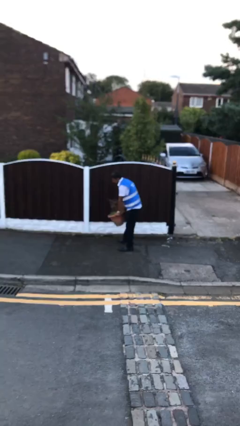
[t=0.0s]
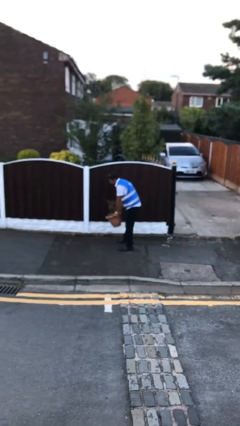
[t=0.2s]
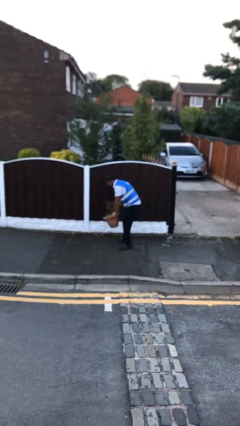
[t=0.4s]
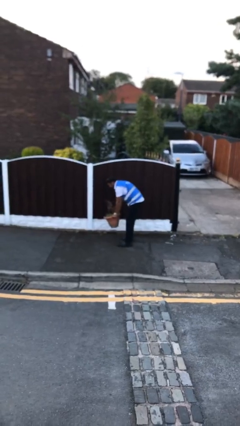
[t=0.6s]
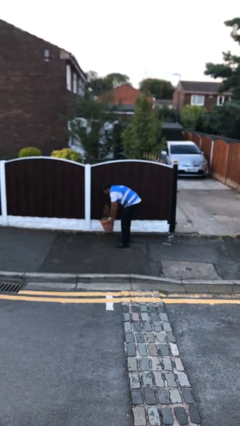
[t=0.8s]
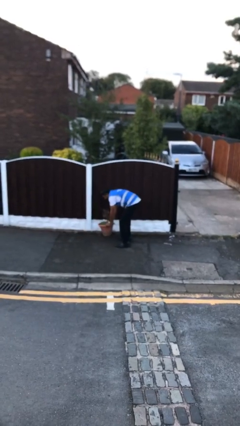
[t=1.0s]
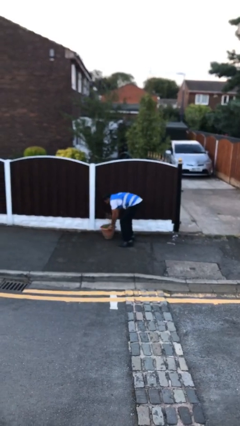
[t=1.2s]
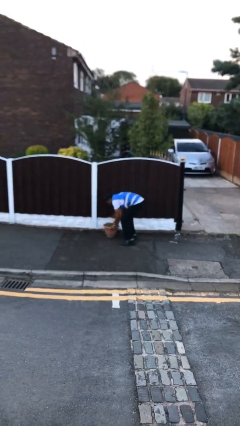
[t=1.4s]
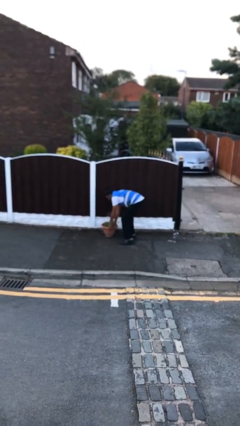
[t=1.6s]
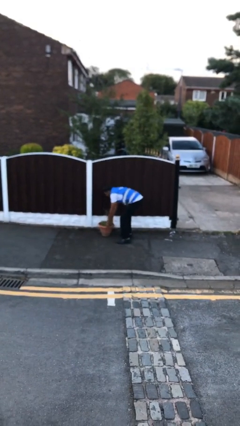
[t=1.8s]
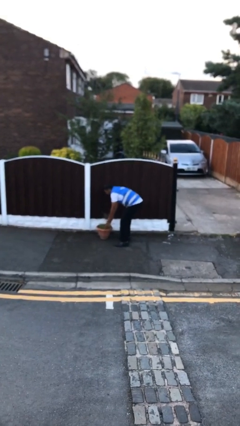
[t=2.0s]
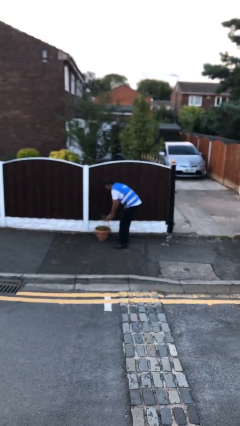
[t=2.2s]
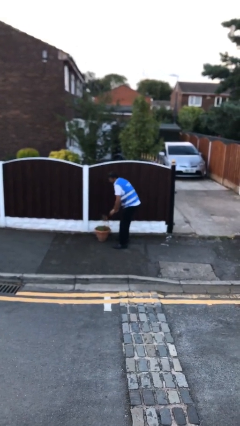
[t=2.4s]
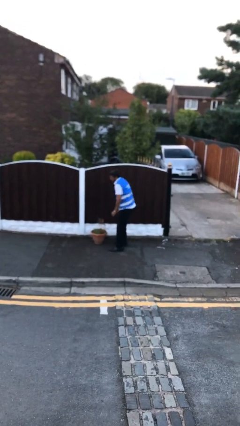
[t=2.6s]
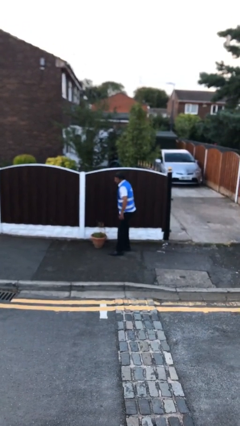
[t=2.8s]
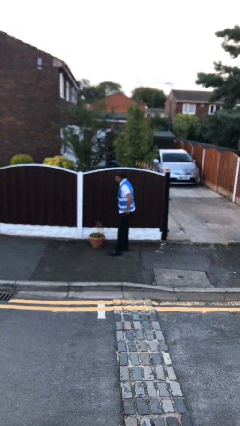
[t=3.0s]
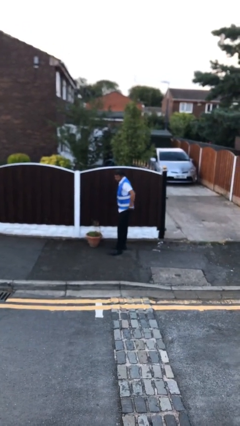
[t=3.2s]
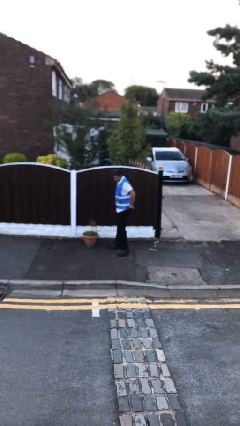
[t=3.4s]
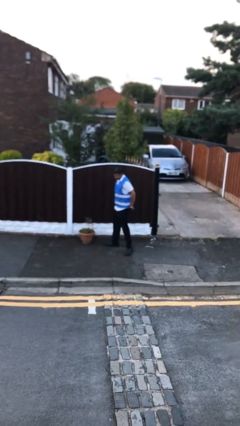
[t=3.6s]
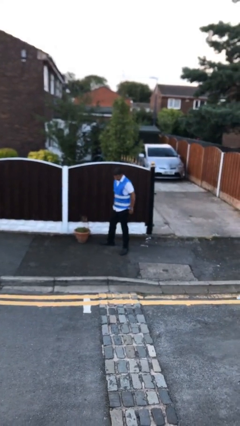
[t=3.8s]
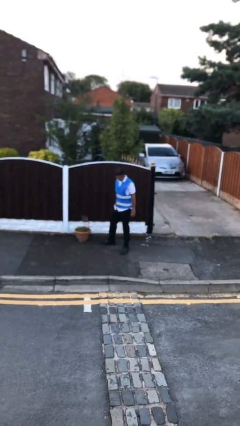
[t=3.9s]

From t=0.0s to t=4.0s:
person puts down object on floor

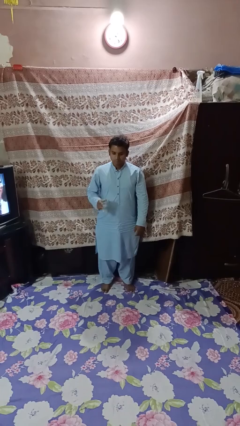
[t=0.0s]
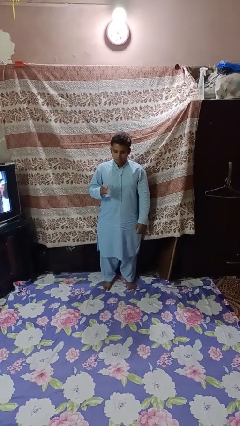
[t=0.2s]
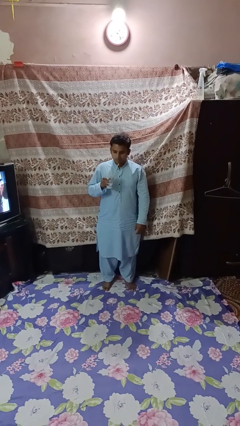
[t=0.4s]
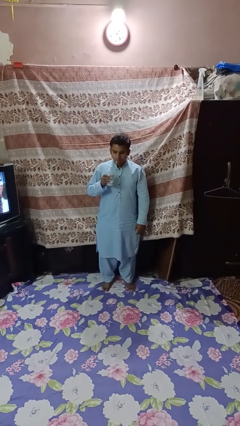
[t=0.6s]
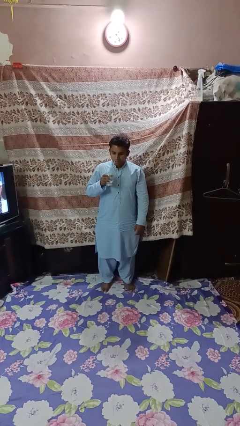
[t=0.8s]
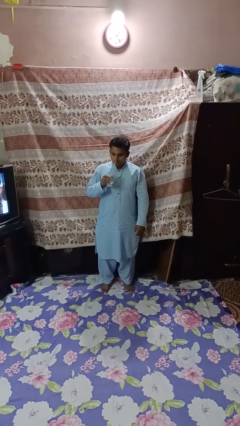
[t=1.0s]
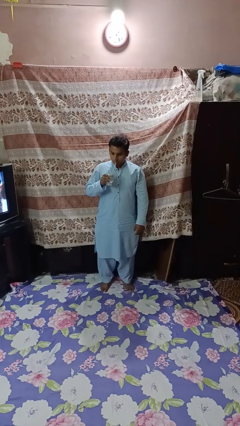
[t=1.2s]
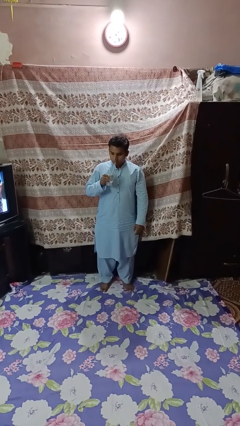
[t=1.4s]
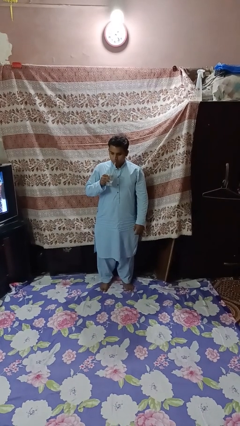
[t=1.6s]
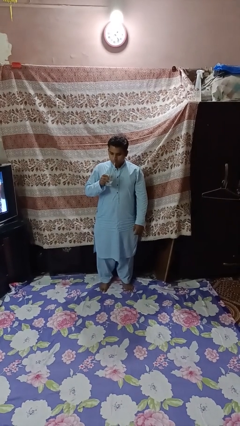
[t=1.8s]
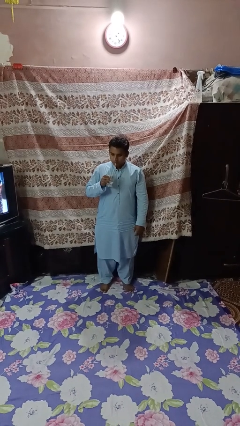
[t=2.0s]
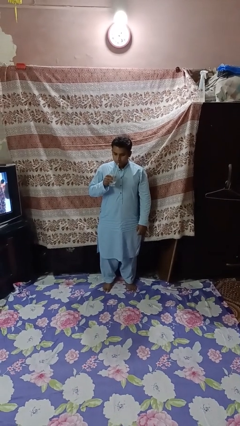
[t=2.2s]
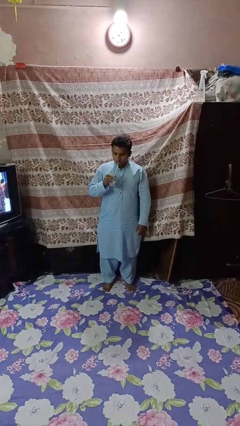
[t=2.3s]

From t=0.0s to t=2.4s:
person drinks from straw

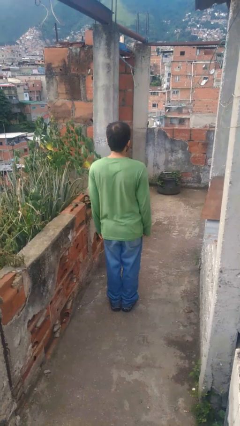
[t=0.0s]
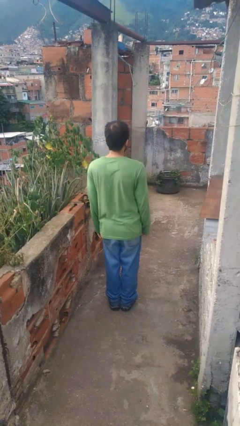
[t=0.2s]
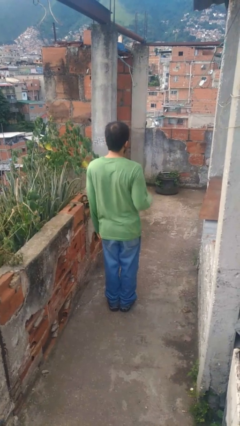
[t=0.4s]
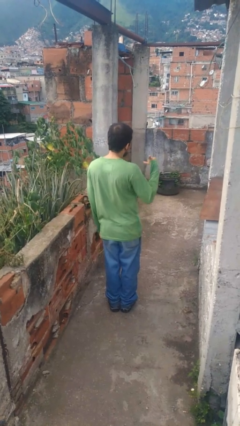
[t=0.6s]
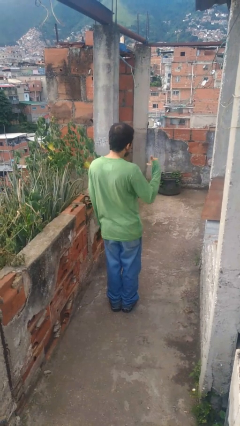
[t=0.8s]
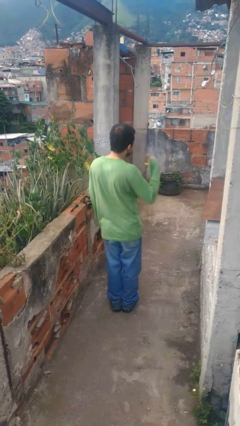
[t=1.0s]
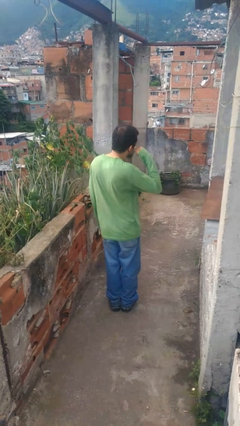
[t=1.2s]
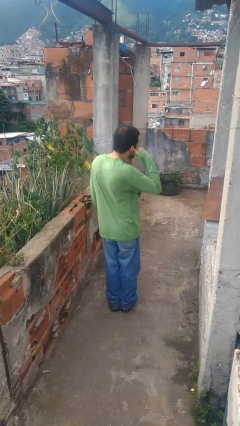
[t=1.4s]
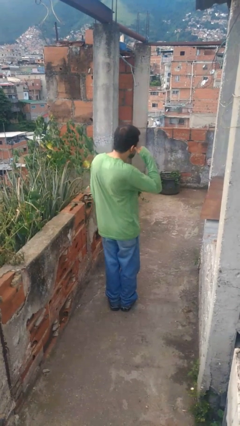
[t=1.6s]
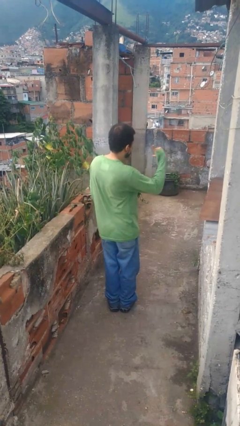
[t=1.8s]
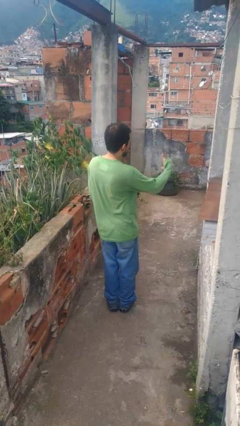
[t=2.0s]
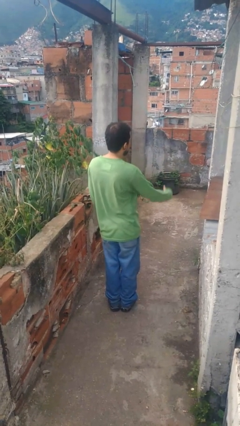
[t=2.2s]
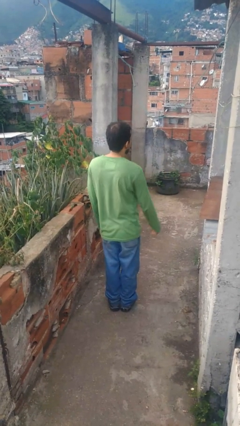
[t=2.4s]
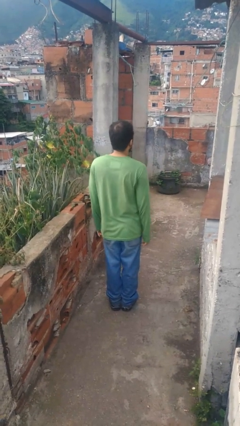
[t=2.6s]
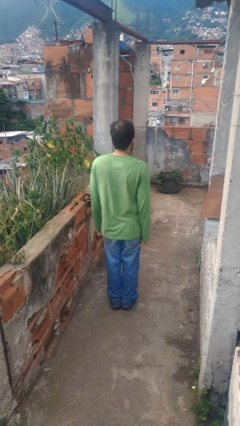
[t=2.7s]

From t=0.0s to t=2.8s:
person gestures call me

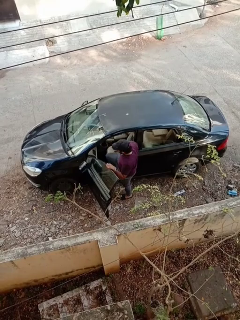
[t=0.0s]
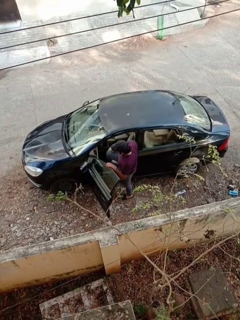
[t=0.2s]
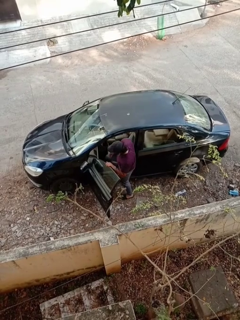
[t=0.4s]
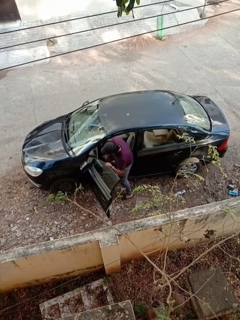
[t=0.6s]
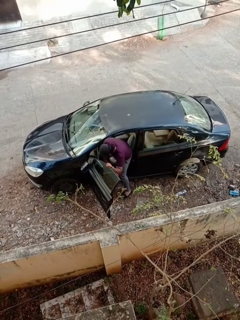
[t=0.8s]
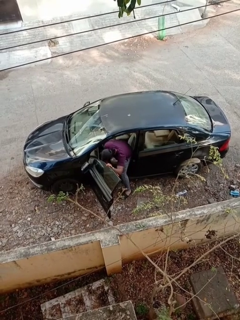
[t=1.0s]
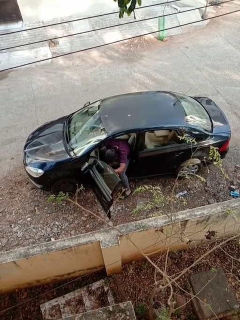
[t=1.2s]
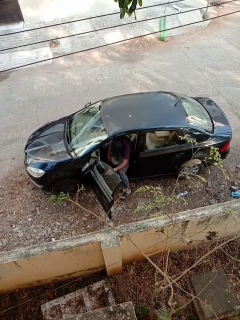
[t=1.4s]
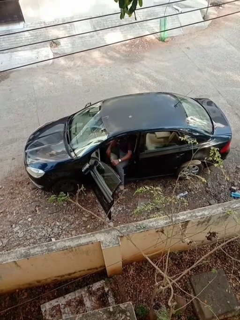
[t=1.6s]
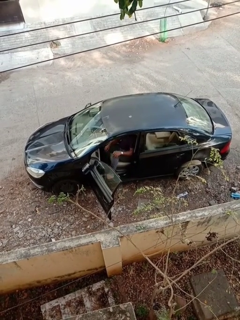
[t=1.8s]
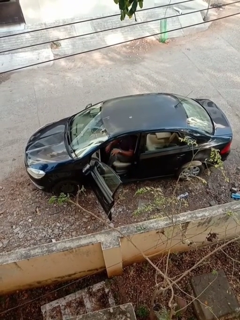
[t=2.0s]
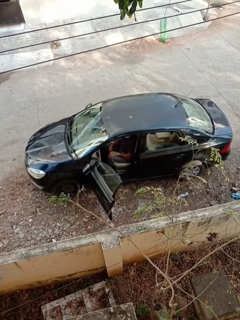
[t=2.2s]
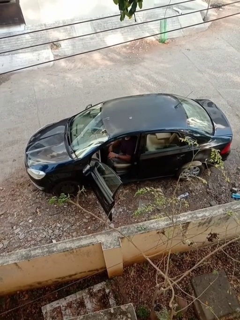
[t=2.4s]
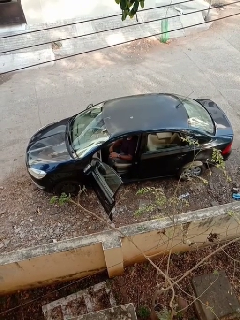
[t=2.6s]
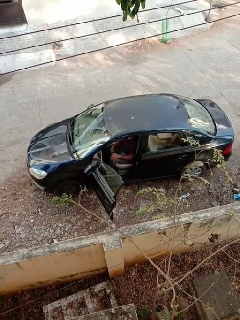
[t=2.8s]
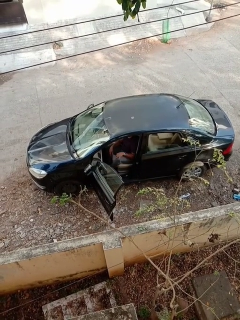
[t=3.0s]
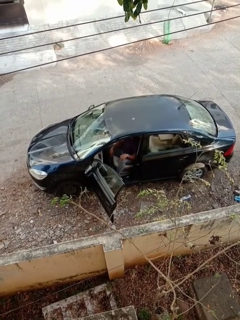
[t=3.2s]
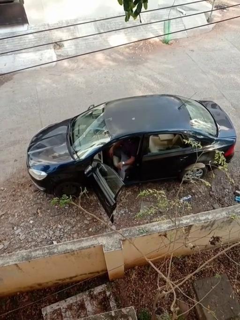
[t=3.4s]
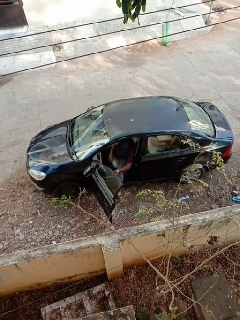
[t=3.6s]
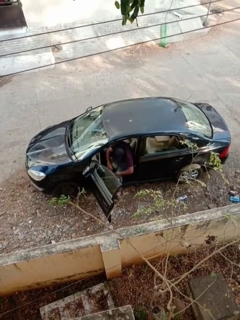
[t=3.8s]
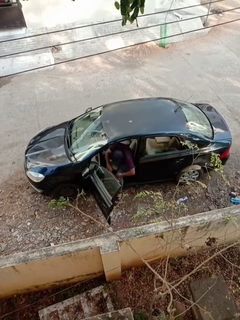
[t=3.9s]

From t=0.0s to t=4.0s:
person enters car

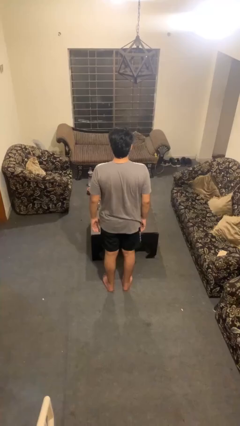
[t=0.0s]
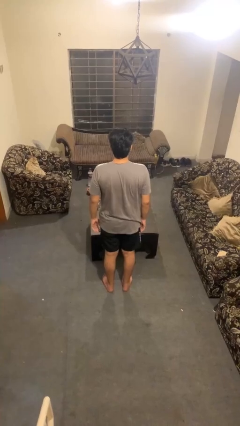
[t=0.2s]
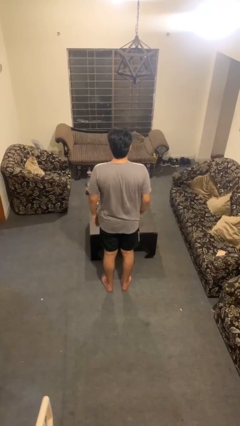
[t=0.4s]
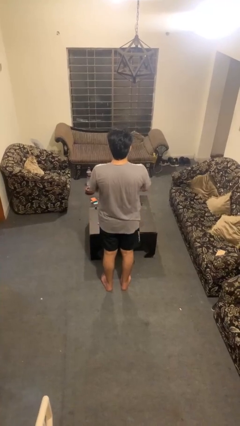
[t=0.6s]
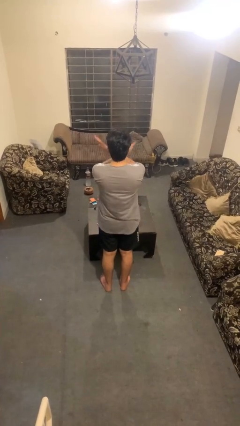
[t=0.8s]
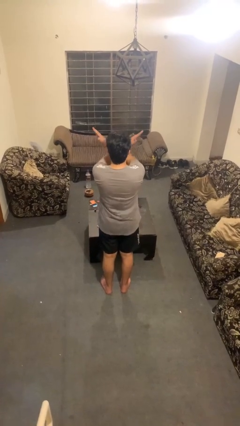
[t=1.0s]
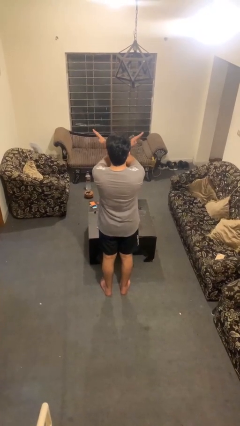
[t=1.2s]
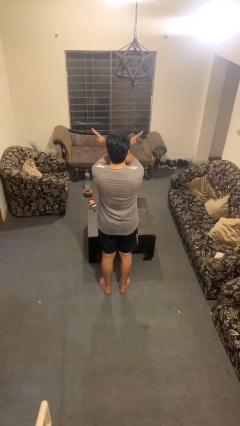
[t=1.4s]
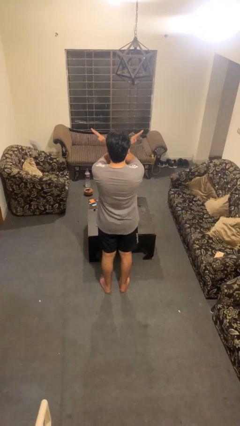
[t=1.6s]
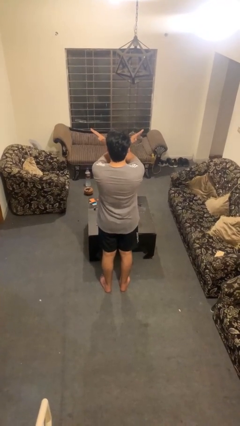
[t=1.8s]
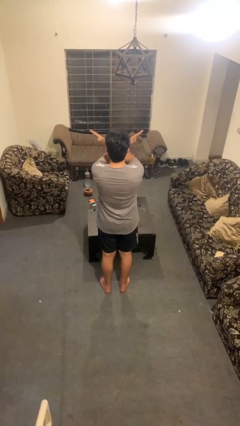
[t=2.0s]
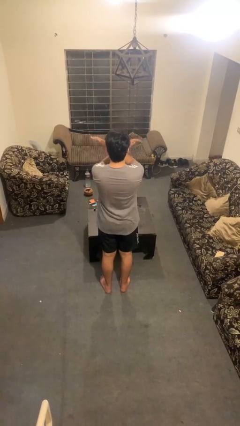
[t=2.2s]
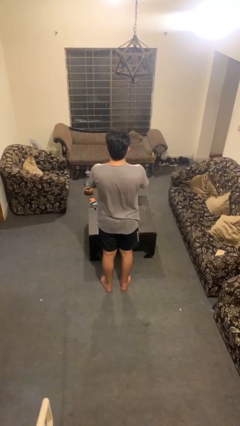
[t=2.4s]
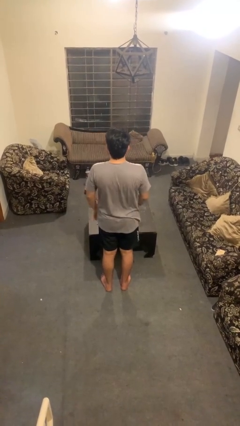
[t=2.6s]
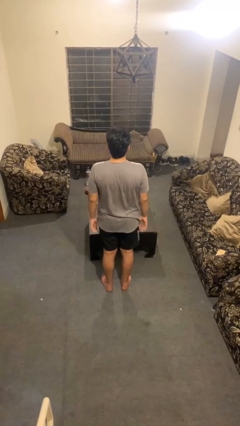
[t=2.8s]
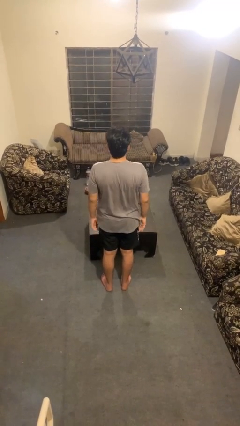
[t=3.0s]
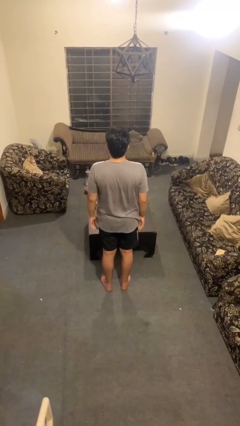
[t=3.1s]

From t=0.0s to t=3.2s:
person gestures arms x

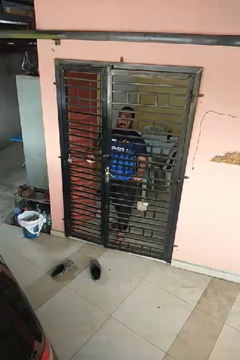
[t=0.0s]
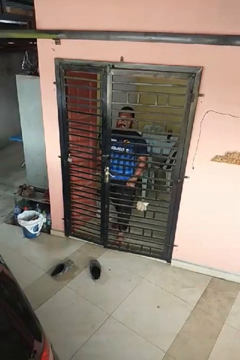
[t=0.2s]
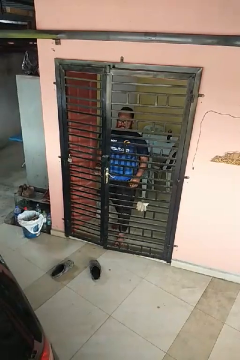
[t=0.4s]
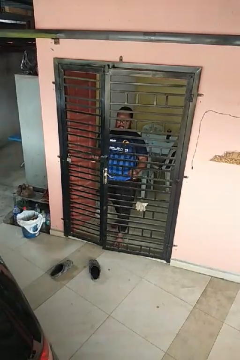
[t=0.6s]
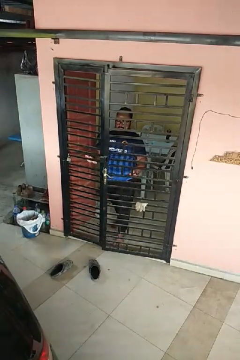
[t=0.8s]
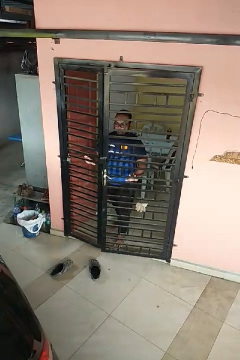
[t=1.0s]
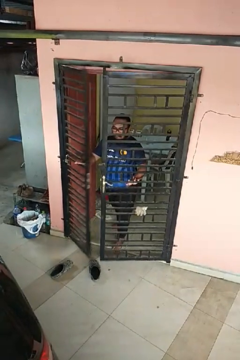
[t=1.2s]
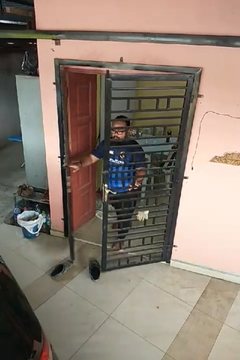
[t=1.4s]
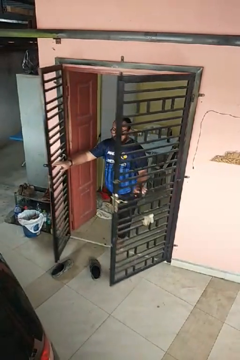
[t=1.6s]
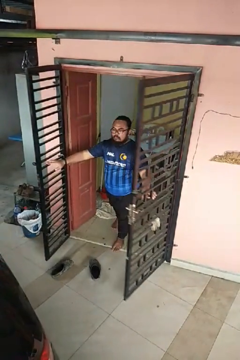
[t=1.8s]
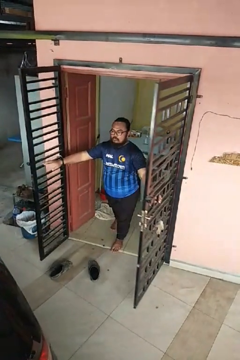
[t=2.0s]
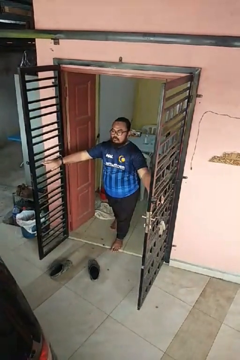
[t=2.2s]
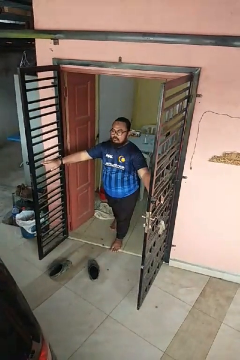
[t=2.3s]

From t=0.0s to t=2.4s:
person opens gate
